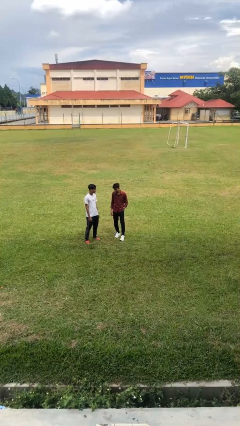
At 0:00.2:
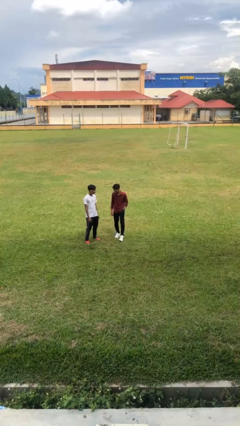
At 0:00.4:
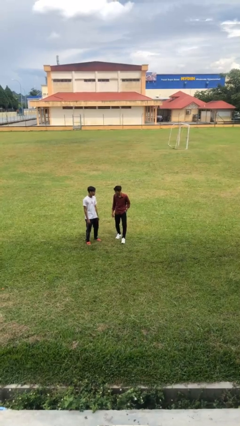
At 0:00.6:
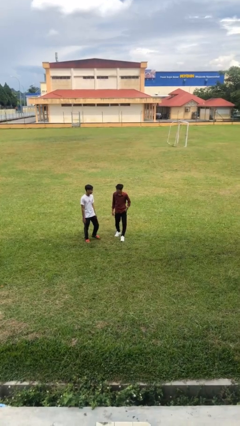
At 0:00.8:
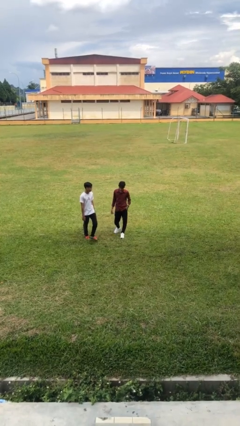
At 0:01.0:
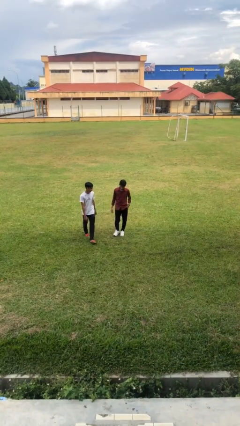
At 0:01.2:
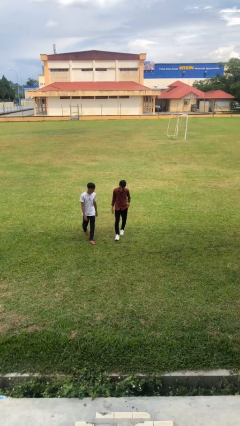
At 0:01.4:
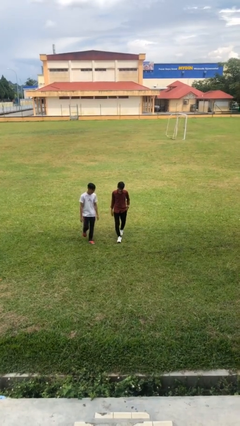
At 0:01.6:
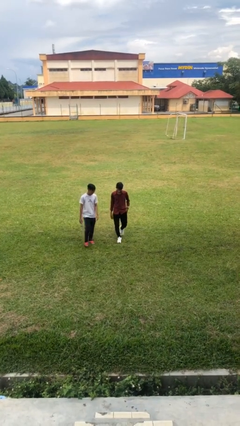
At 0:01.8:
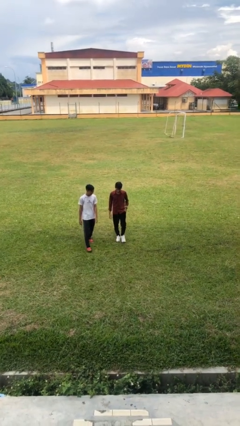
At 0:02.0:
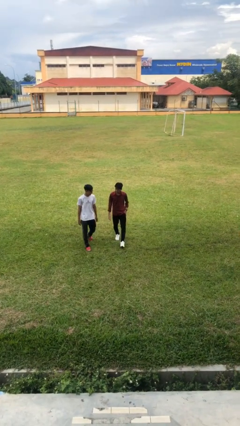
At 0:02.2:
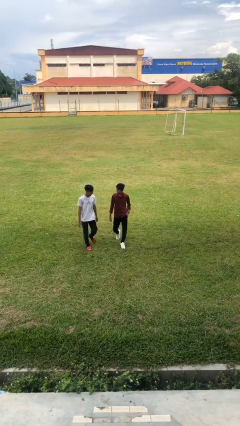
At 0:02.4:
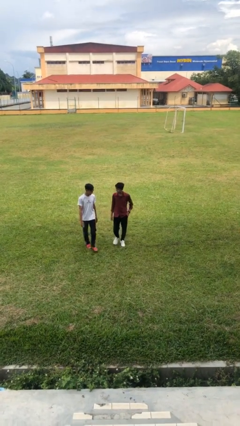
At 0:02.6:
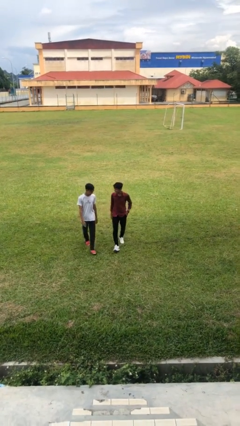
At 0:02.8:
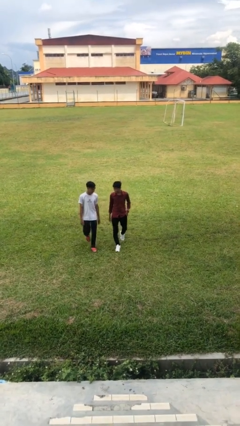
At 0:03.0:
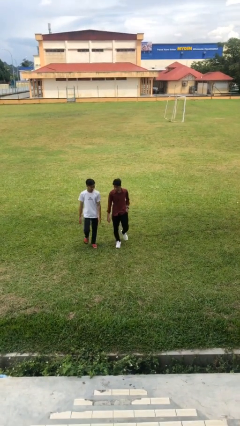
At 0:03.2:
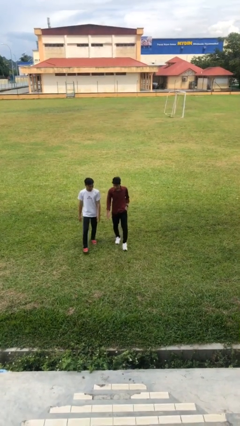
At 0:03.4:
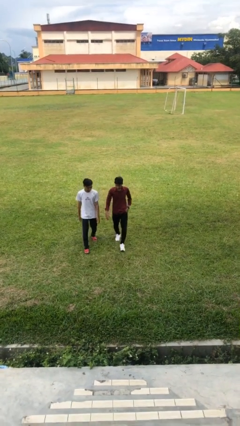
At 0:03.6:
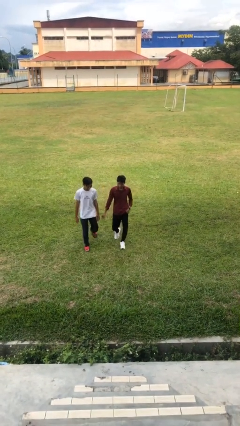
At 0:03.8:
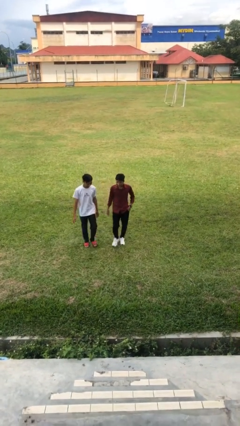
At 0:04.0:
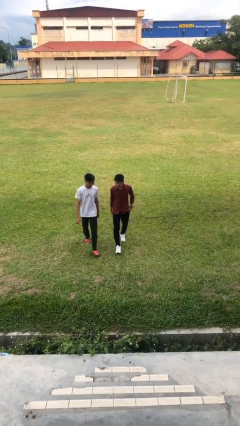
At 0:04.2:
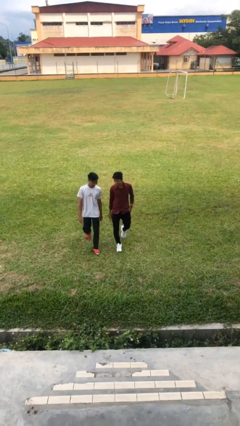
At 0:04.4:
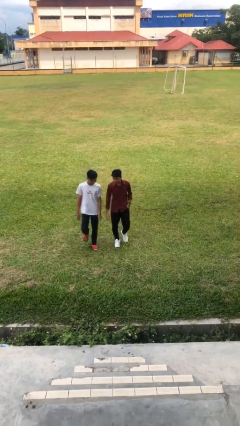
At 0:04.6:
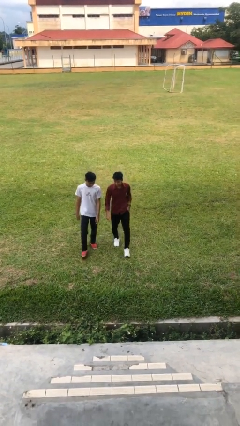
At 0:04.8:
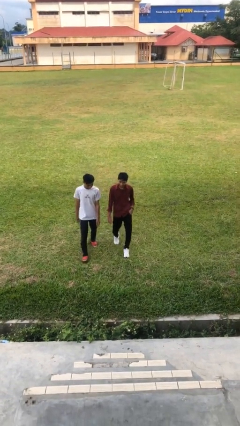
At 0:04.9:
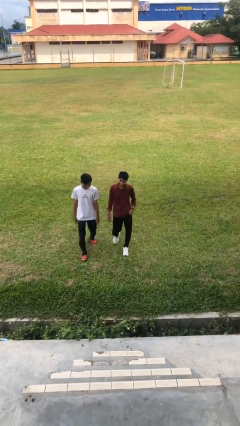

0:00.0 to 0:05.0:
person talks to person

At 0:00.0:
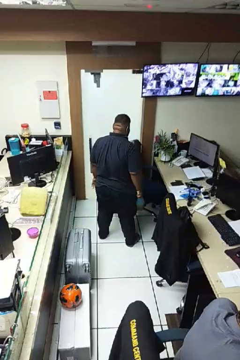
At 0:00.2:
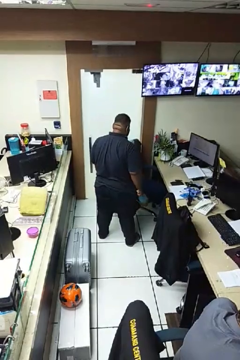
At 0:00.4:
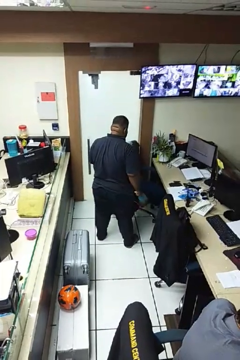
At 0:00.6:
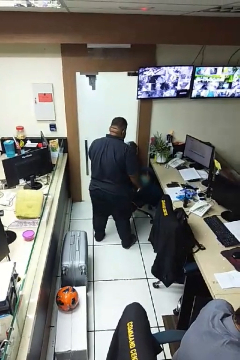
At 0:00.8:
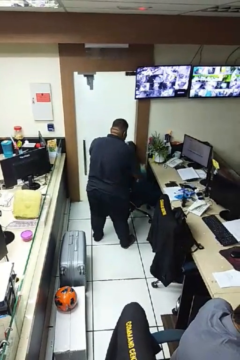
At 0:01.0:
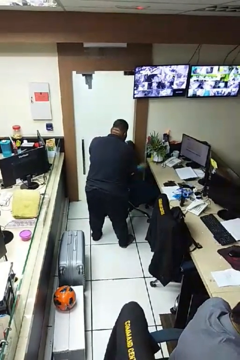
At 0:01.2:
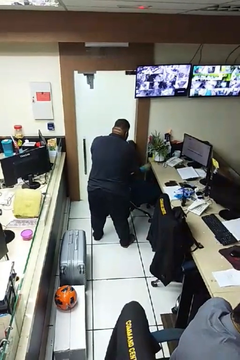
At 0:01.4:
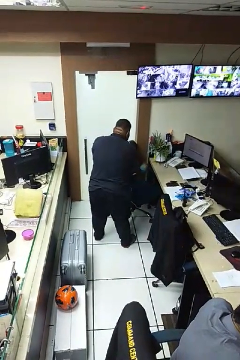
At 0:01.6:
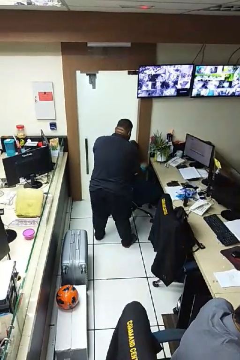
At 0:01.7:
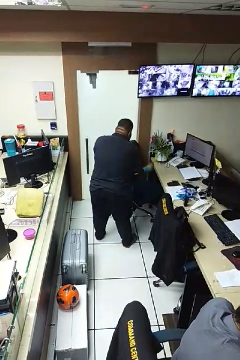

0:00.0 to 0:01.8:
person dusts furniture

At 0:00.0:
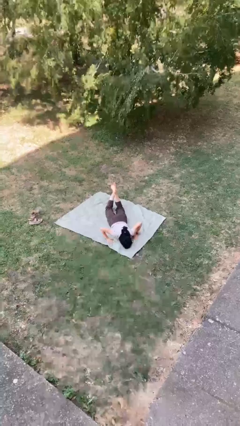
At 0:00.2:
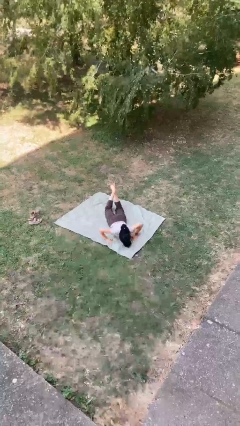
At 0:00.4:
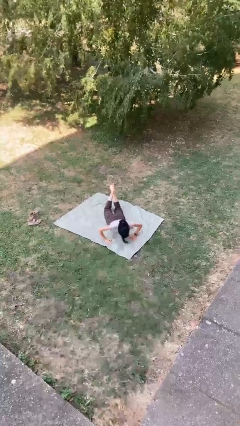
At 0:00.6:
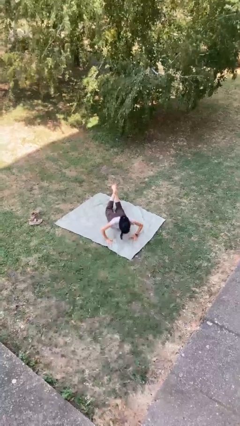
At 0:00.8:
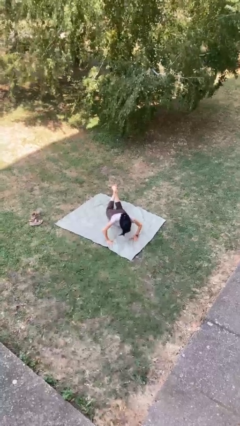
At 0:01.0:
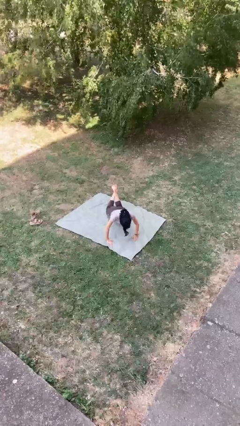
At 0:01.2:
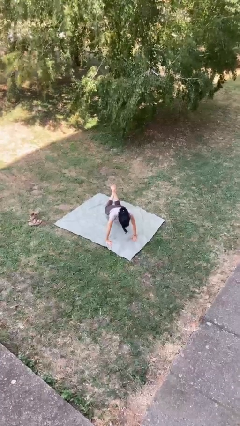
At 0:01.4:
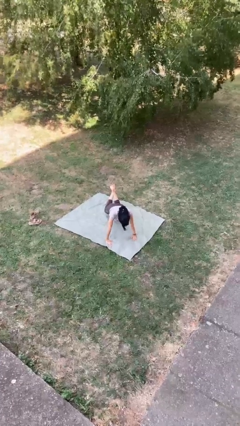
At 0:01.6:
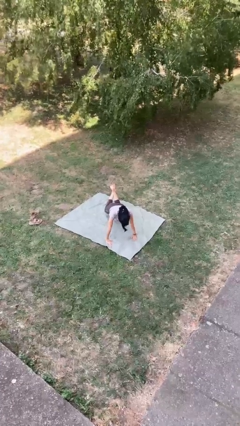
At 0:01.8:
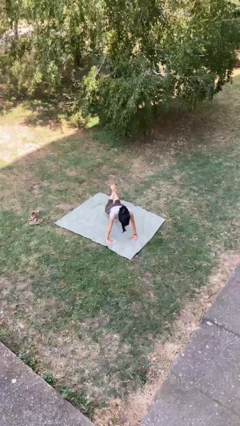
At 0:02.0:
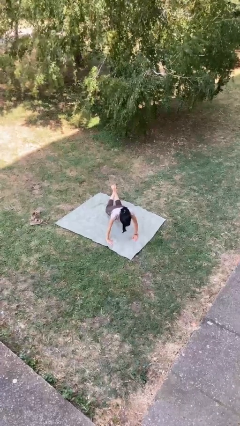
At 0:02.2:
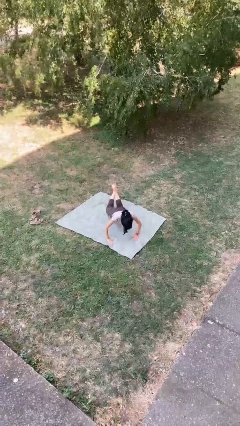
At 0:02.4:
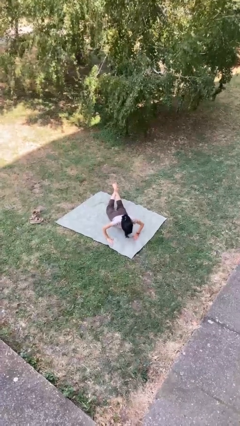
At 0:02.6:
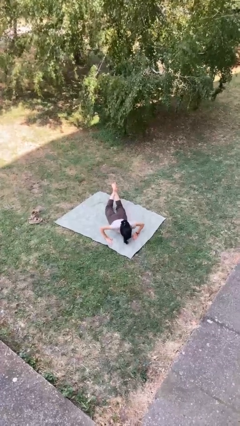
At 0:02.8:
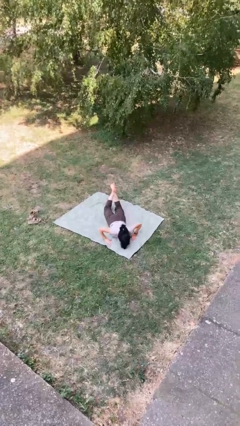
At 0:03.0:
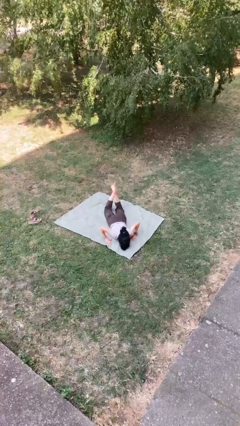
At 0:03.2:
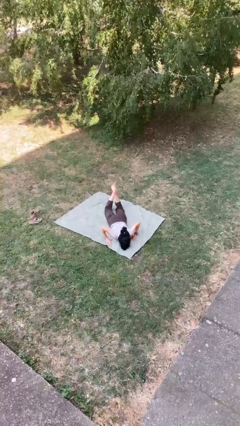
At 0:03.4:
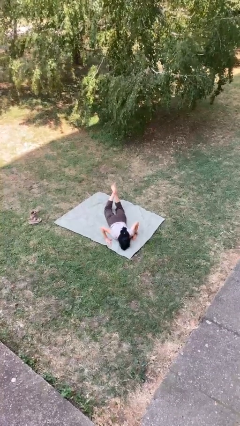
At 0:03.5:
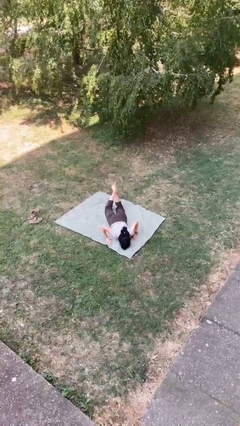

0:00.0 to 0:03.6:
person exercises with pushup

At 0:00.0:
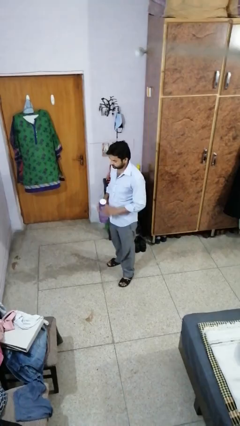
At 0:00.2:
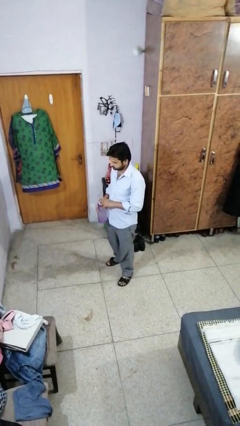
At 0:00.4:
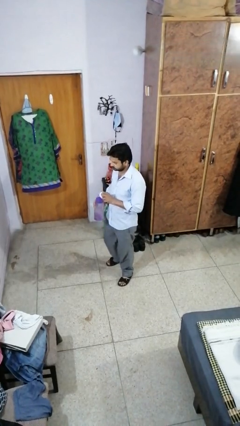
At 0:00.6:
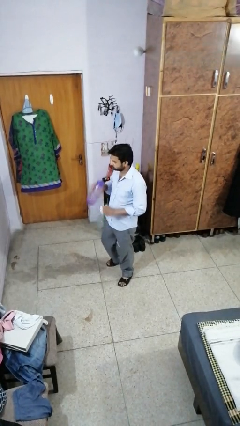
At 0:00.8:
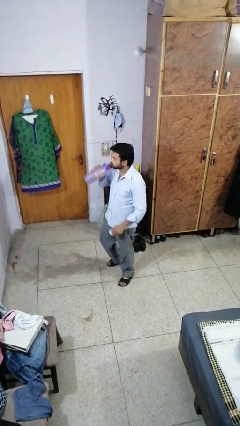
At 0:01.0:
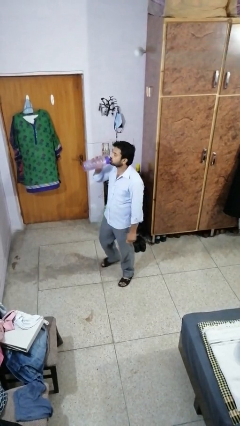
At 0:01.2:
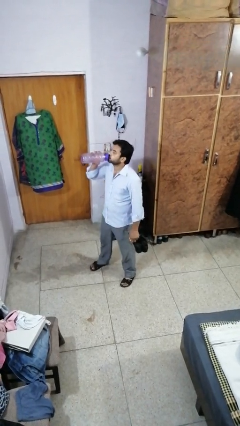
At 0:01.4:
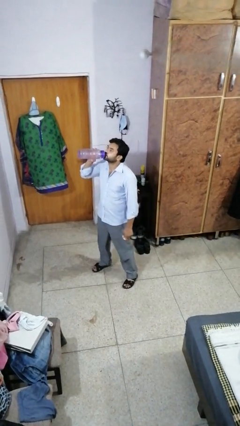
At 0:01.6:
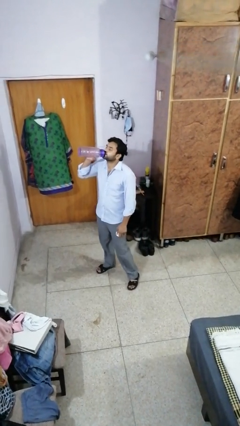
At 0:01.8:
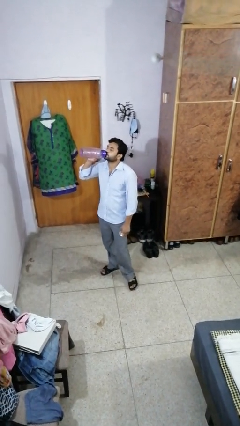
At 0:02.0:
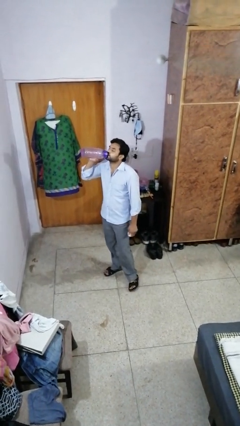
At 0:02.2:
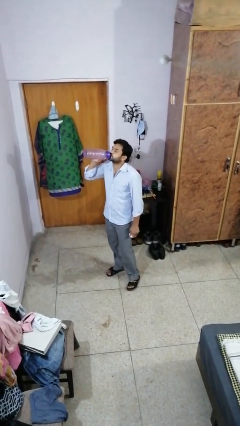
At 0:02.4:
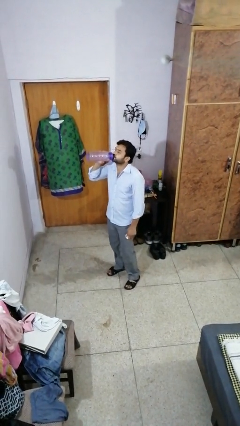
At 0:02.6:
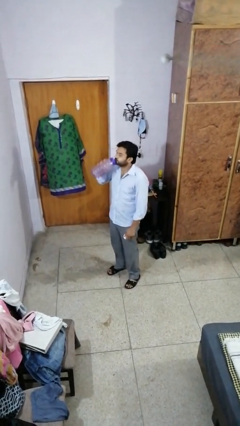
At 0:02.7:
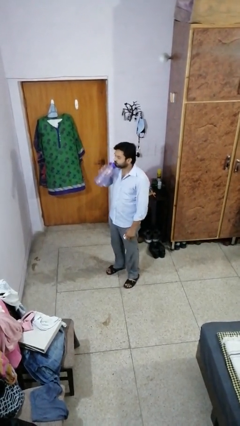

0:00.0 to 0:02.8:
person drinks from bottle

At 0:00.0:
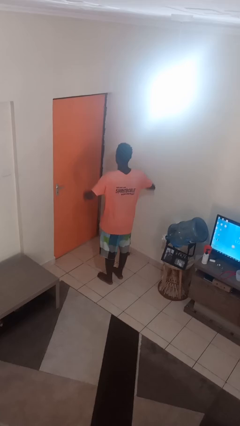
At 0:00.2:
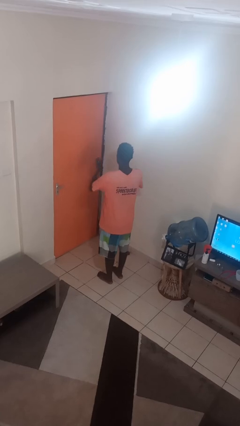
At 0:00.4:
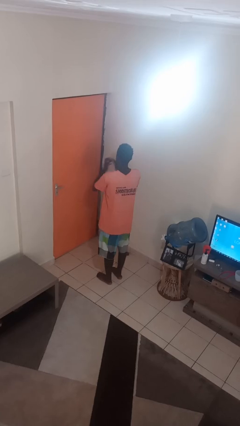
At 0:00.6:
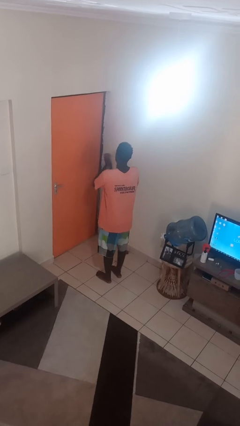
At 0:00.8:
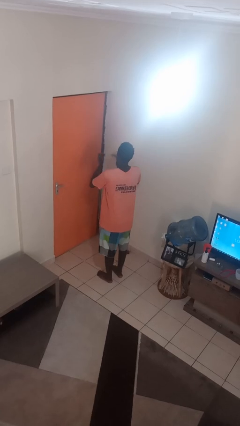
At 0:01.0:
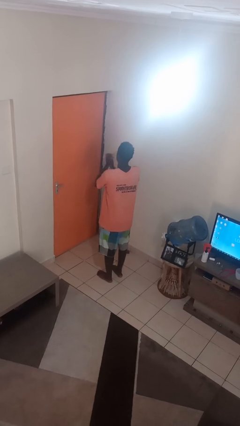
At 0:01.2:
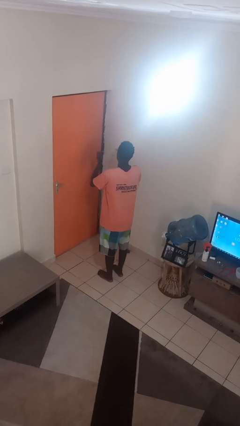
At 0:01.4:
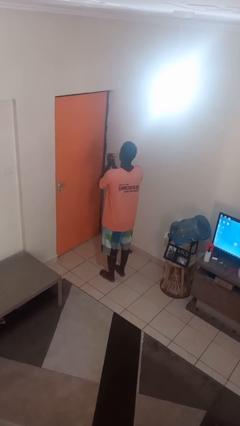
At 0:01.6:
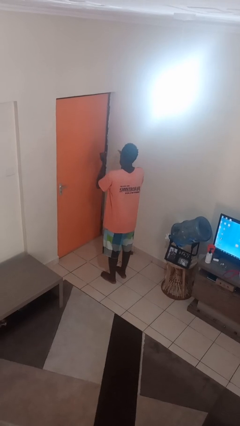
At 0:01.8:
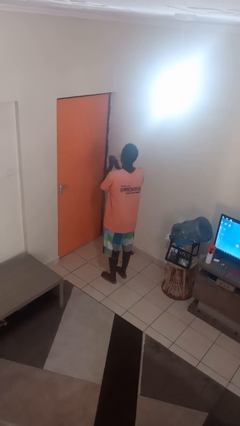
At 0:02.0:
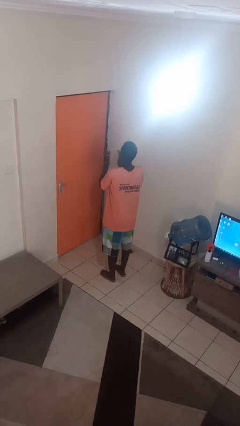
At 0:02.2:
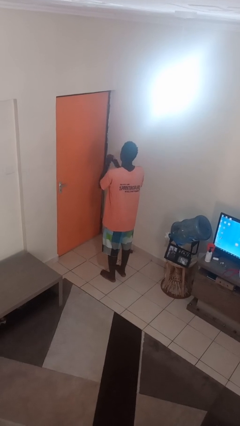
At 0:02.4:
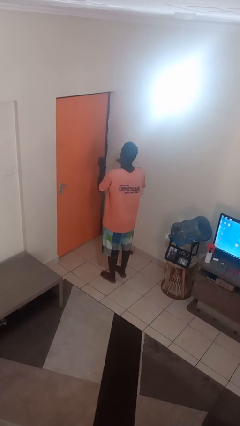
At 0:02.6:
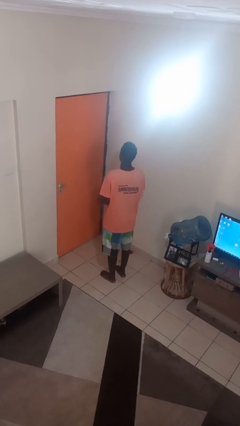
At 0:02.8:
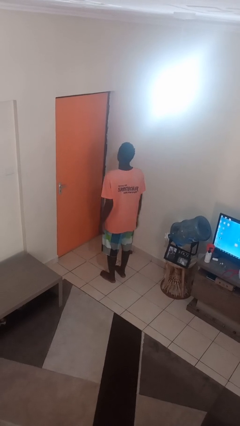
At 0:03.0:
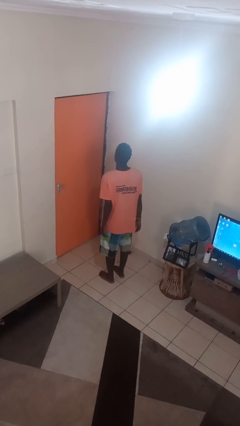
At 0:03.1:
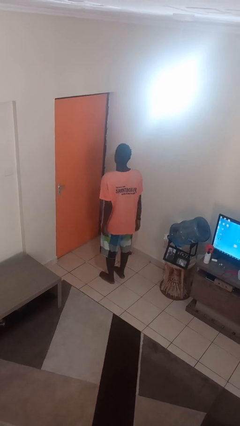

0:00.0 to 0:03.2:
person claps hands

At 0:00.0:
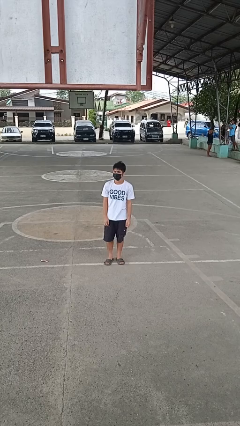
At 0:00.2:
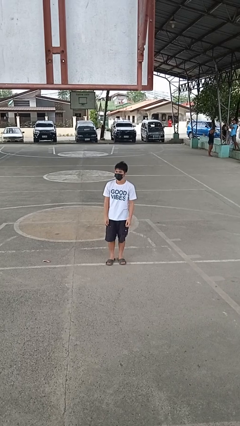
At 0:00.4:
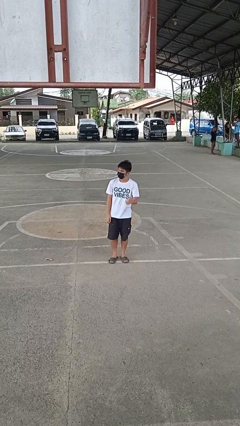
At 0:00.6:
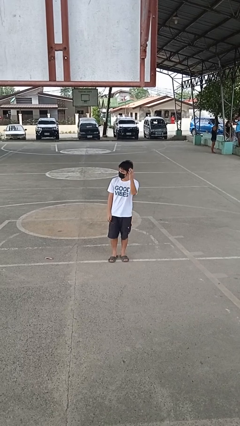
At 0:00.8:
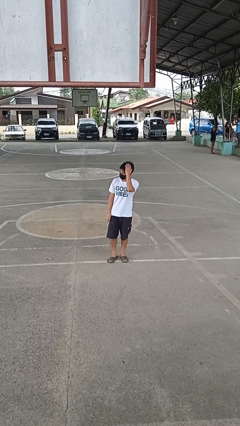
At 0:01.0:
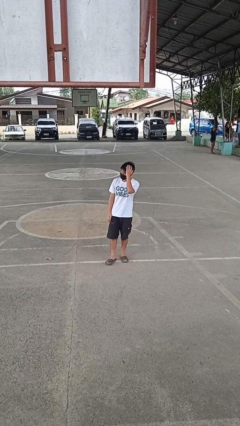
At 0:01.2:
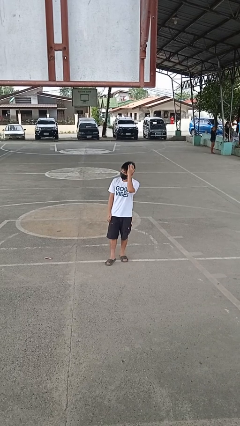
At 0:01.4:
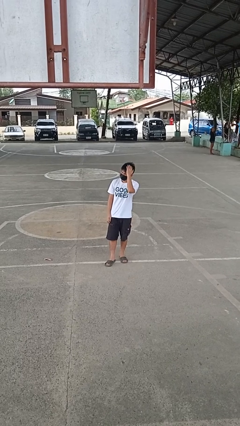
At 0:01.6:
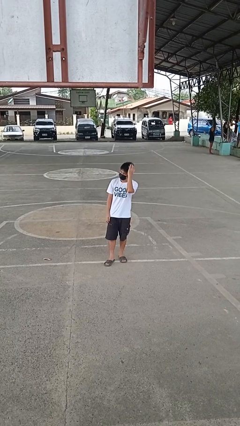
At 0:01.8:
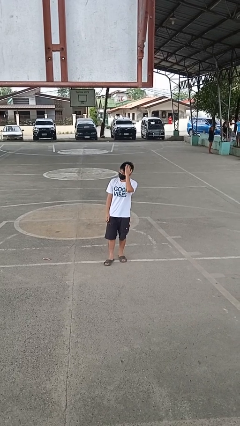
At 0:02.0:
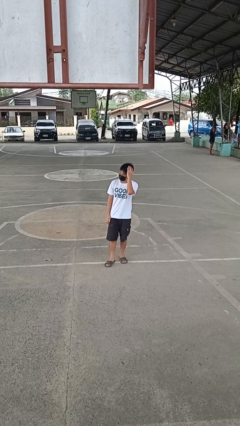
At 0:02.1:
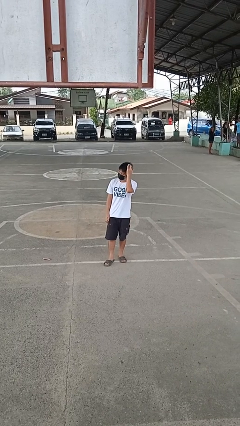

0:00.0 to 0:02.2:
person pats head
